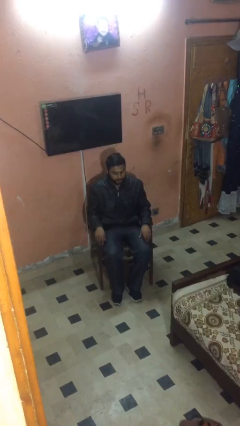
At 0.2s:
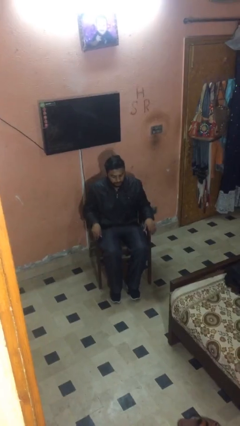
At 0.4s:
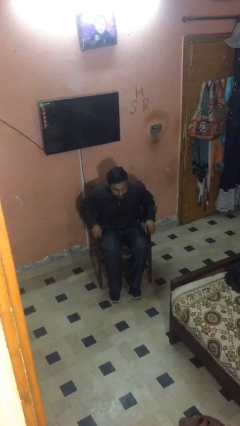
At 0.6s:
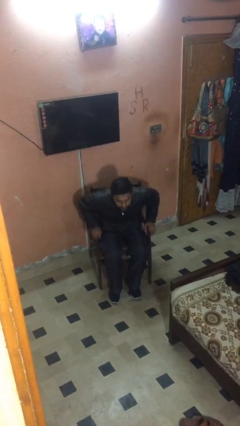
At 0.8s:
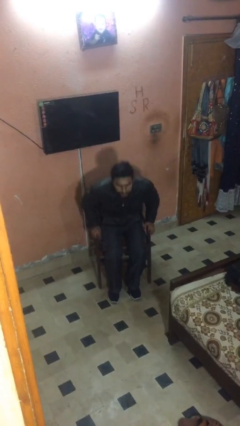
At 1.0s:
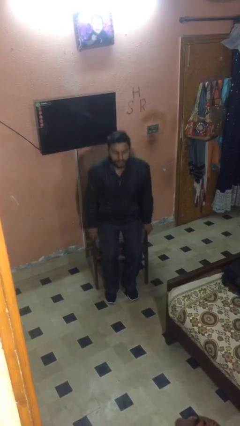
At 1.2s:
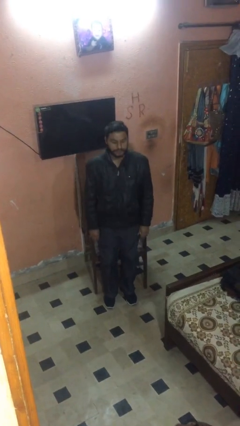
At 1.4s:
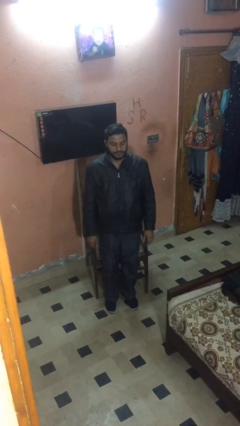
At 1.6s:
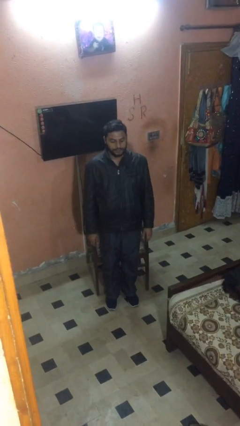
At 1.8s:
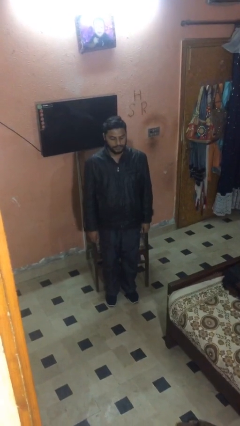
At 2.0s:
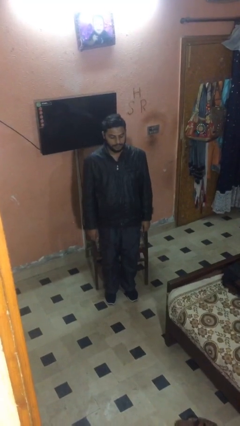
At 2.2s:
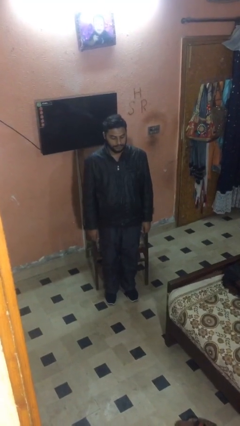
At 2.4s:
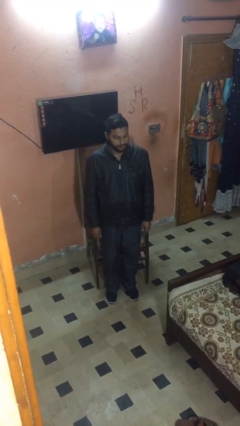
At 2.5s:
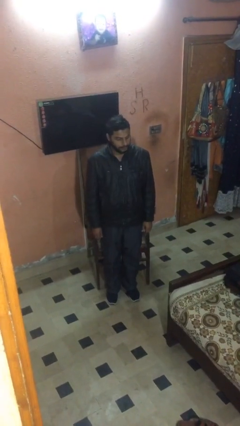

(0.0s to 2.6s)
person stands up

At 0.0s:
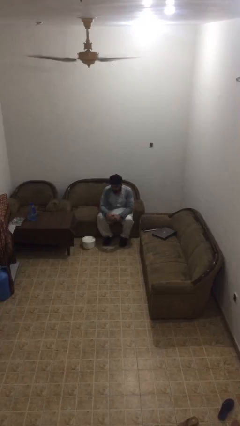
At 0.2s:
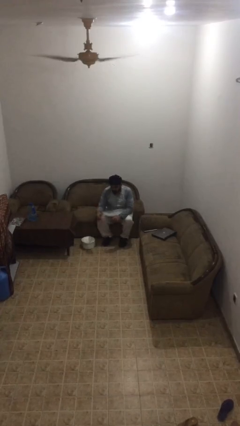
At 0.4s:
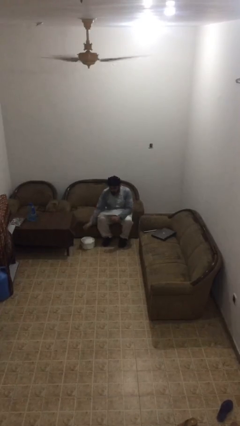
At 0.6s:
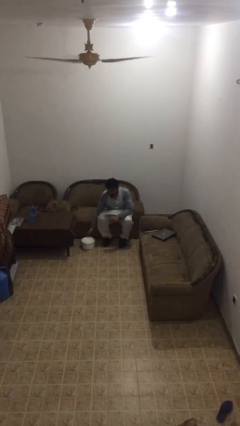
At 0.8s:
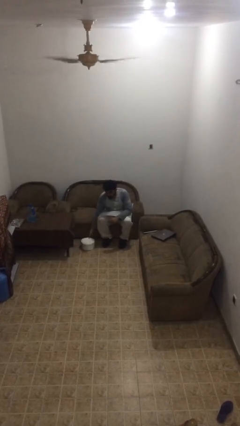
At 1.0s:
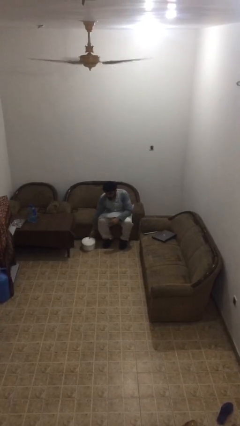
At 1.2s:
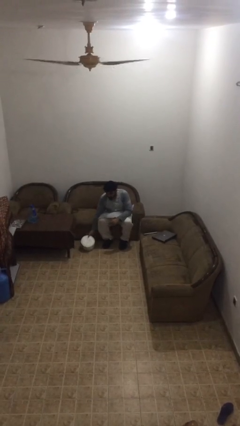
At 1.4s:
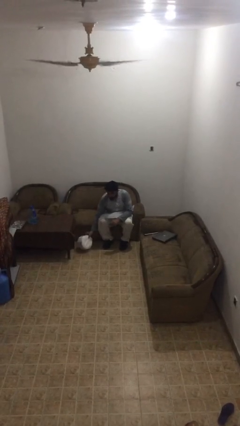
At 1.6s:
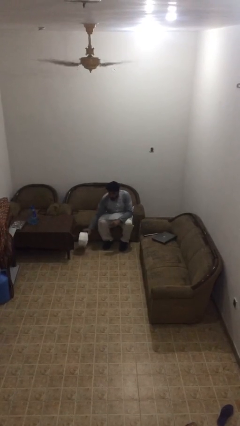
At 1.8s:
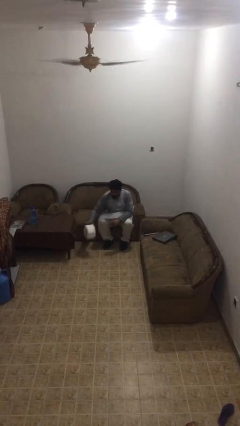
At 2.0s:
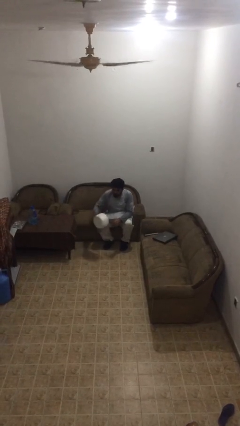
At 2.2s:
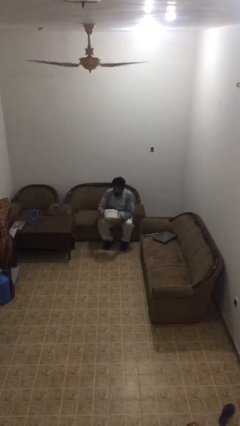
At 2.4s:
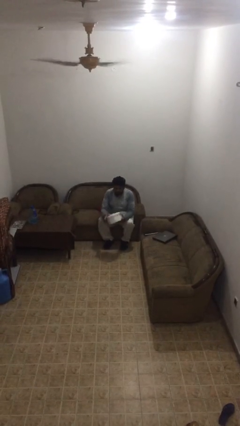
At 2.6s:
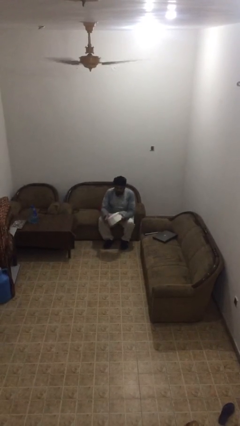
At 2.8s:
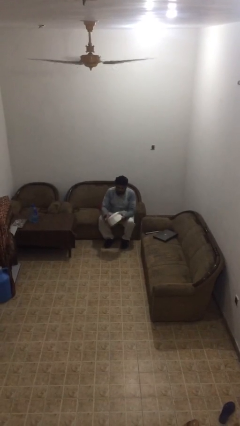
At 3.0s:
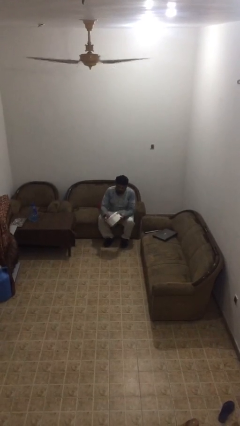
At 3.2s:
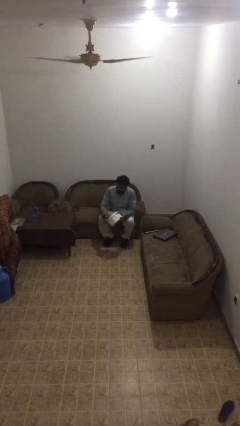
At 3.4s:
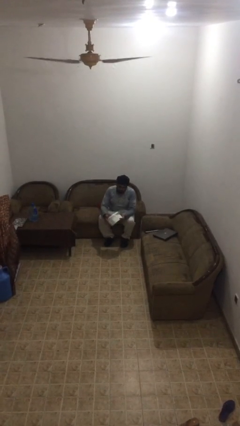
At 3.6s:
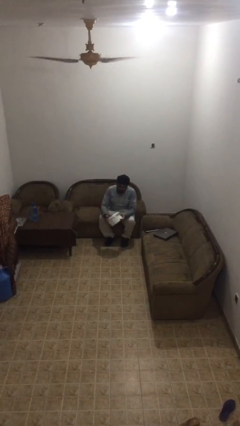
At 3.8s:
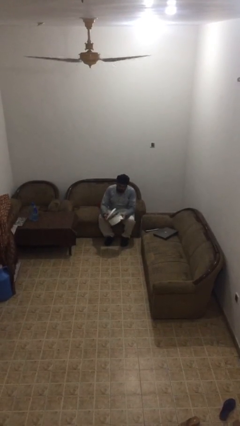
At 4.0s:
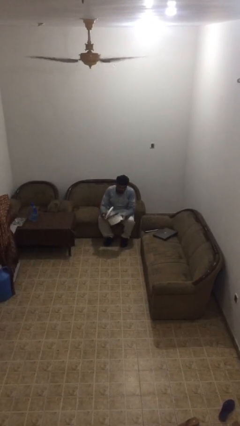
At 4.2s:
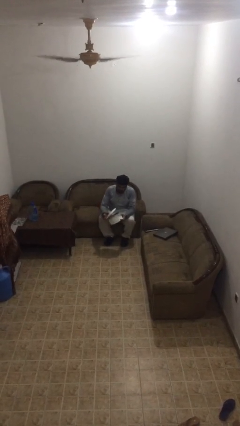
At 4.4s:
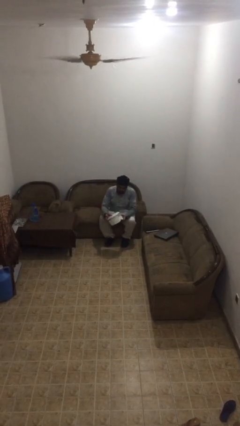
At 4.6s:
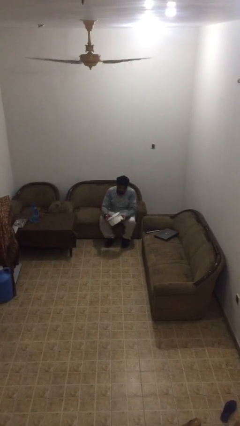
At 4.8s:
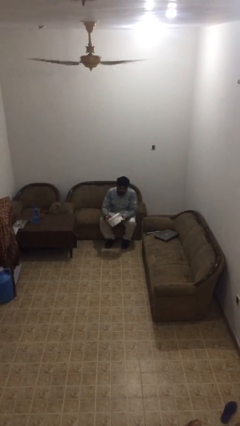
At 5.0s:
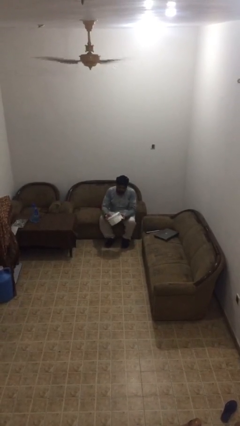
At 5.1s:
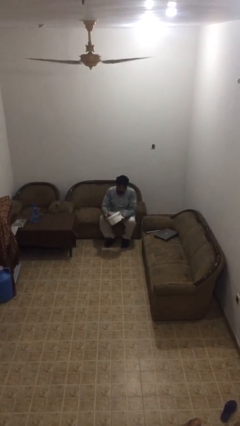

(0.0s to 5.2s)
person picks up object from floor

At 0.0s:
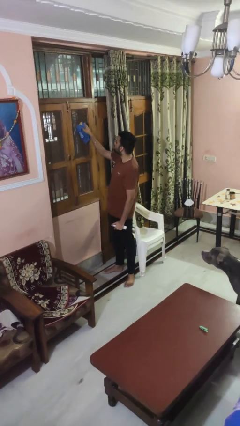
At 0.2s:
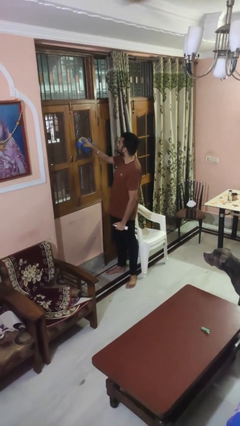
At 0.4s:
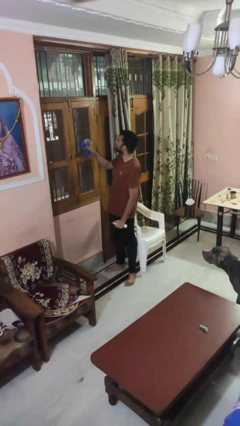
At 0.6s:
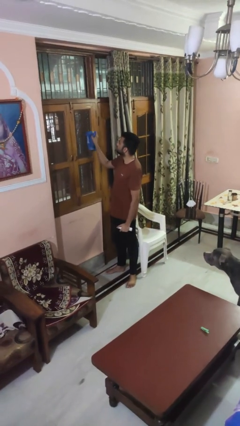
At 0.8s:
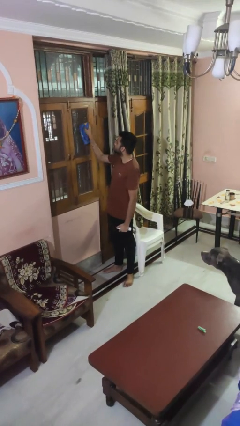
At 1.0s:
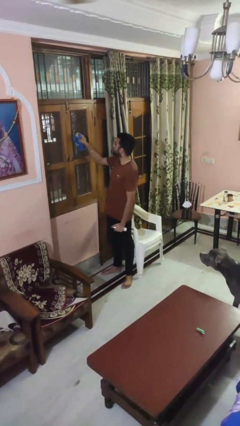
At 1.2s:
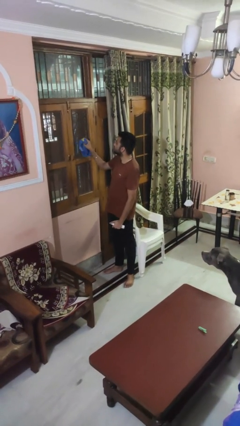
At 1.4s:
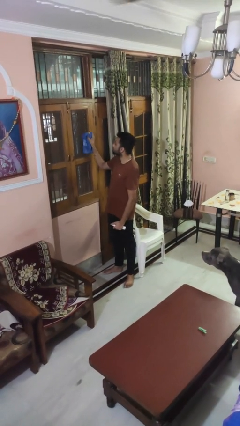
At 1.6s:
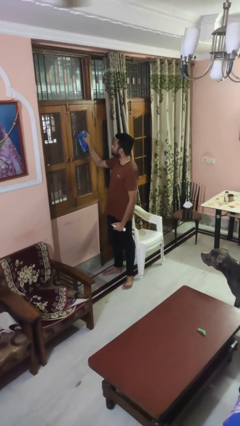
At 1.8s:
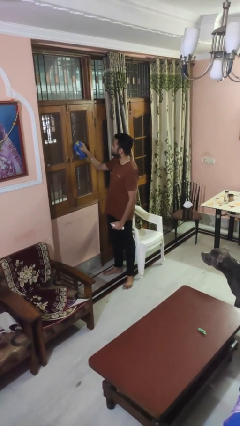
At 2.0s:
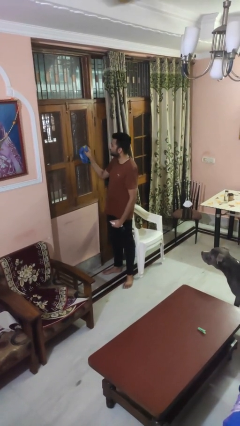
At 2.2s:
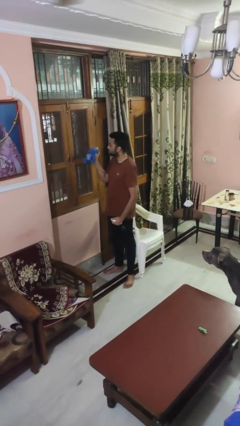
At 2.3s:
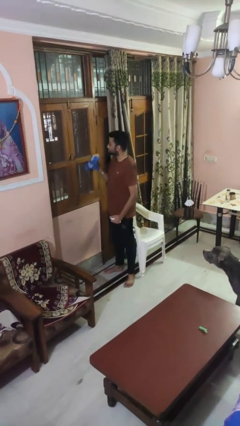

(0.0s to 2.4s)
person washes window

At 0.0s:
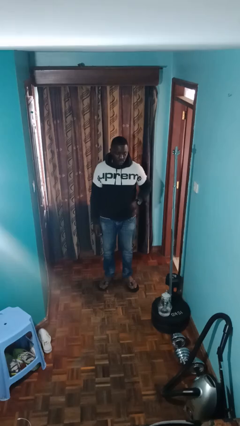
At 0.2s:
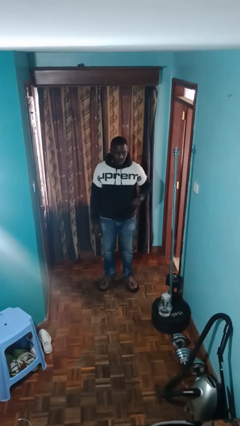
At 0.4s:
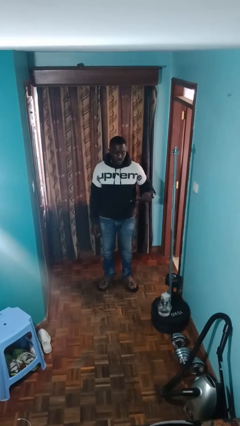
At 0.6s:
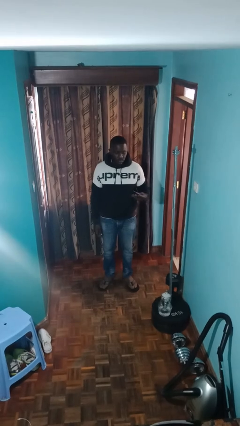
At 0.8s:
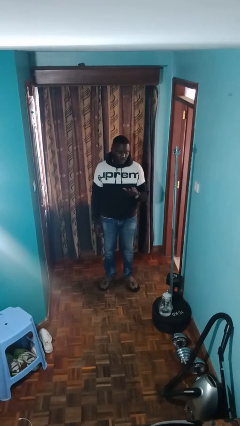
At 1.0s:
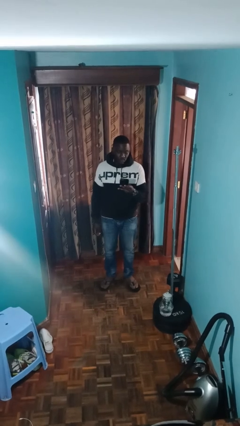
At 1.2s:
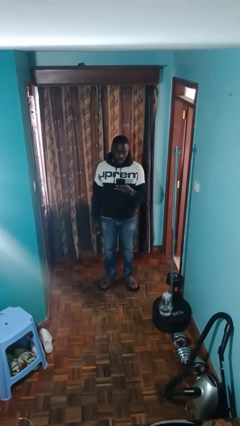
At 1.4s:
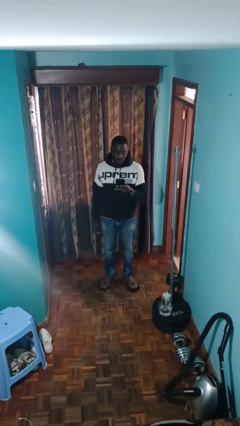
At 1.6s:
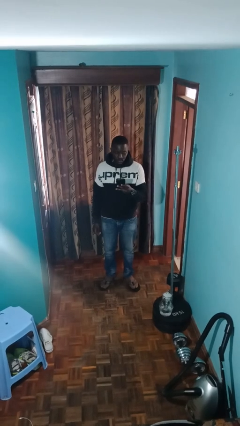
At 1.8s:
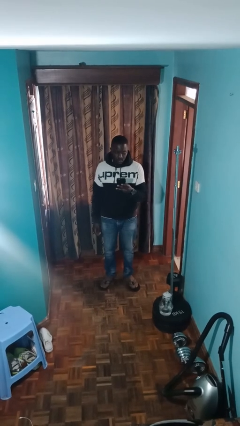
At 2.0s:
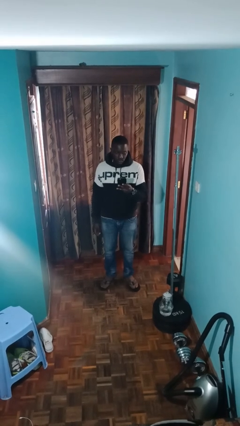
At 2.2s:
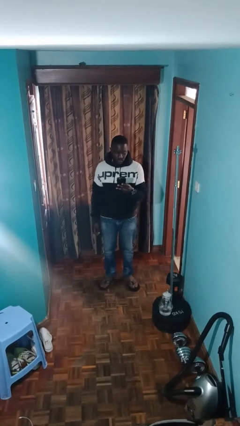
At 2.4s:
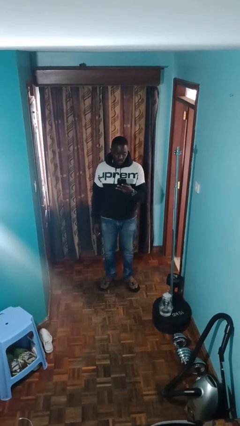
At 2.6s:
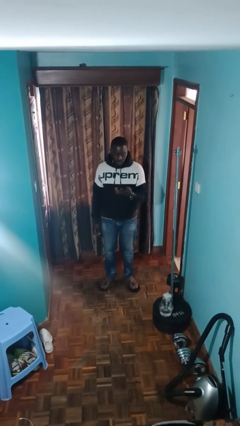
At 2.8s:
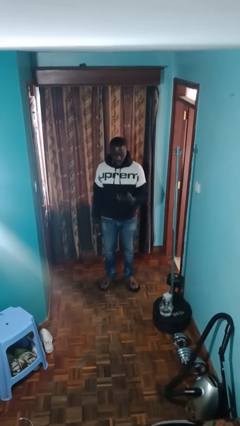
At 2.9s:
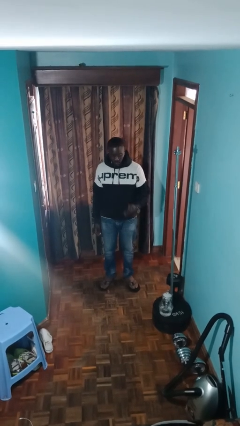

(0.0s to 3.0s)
person takes phone from pocket

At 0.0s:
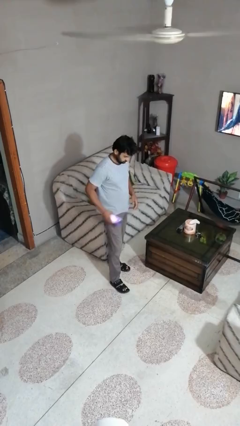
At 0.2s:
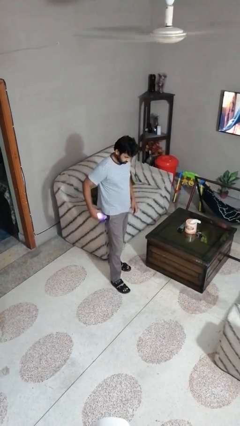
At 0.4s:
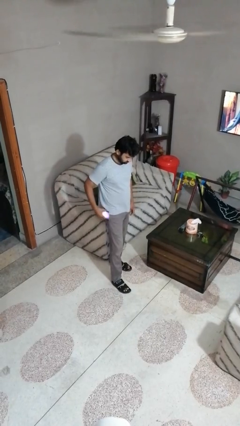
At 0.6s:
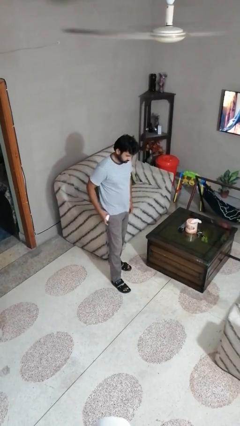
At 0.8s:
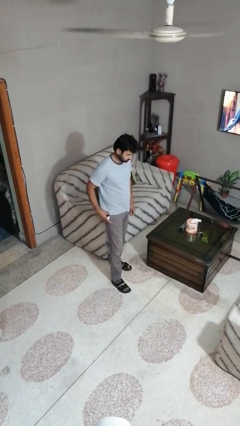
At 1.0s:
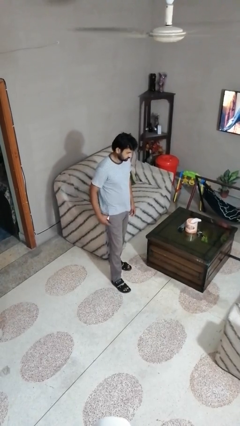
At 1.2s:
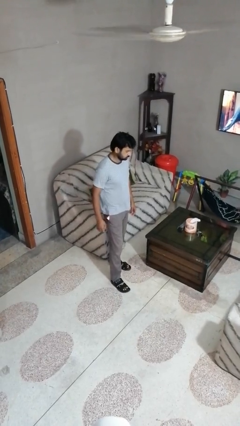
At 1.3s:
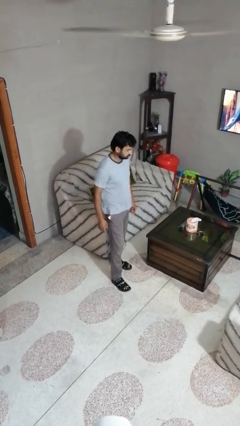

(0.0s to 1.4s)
person puts phone into pocket

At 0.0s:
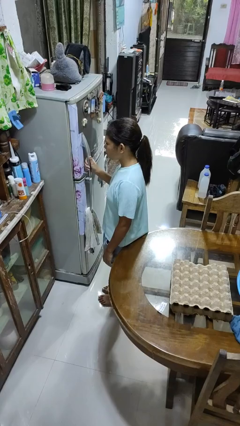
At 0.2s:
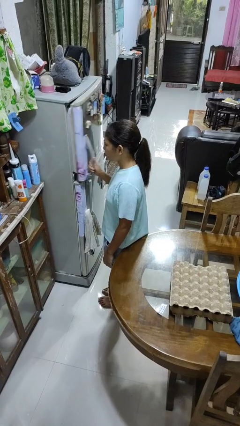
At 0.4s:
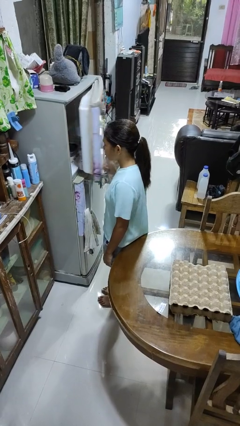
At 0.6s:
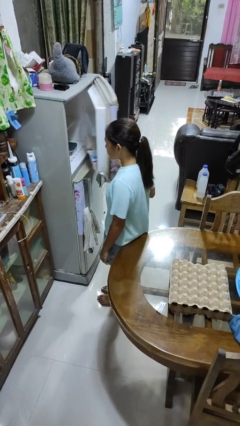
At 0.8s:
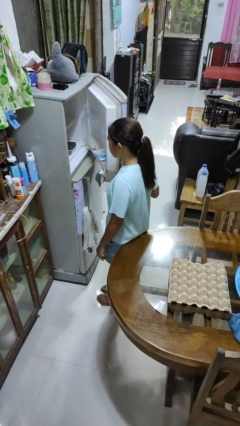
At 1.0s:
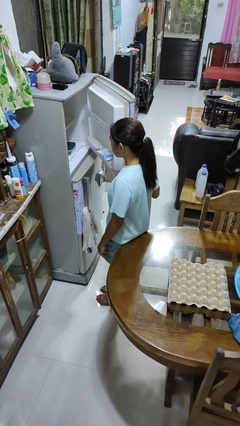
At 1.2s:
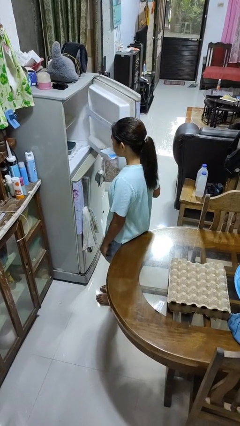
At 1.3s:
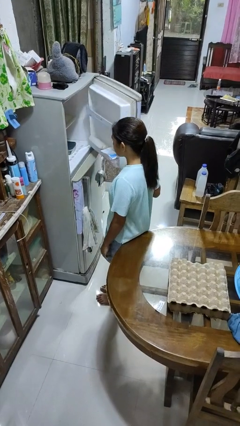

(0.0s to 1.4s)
person opens refrigerator

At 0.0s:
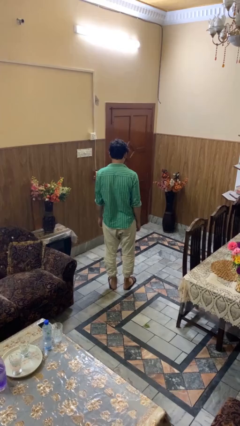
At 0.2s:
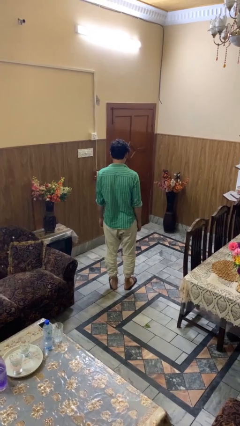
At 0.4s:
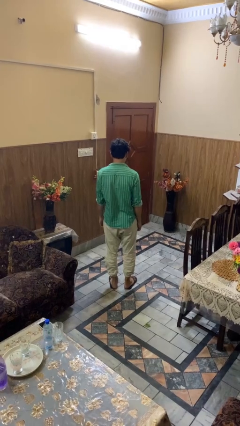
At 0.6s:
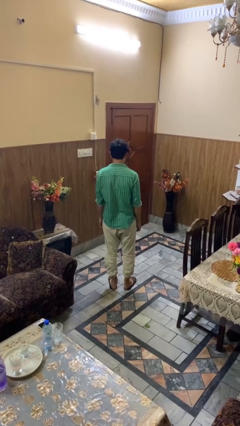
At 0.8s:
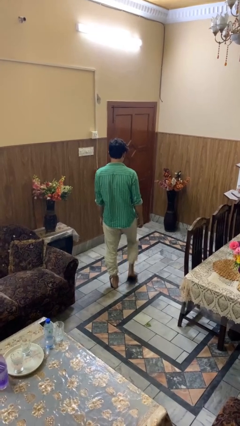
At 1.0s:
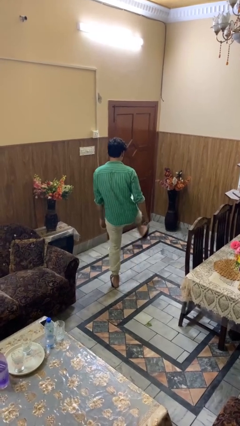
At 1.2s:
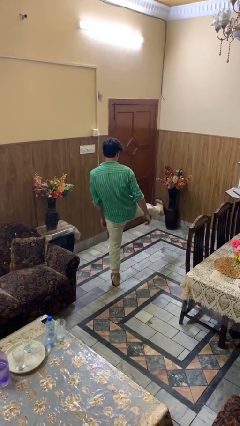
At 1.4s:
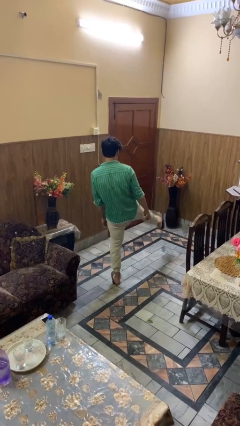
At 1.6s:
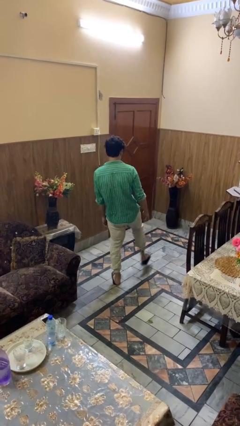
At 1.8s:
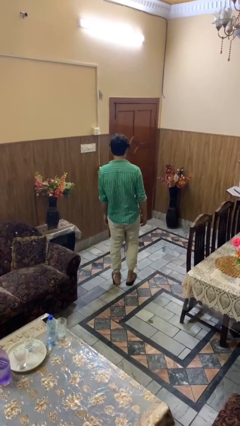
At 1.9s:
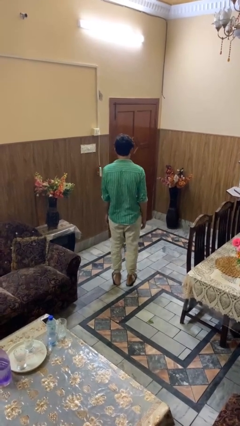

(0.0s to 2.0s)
person karate kicks
